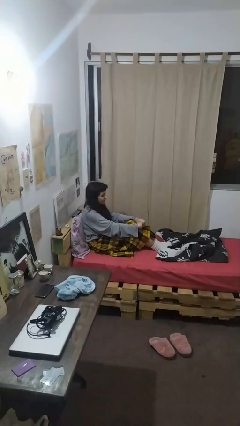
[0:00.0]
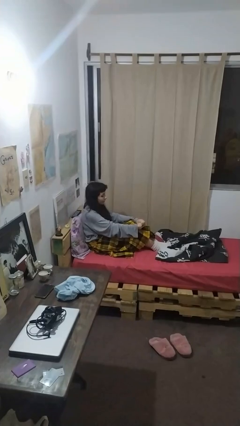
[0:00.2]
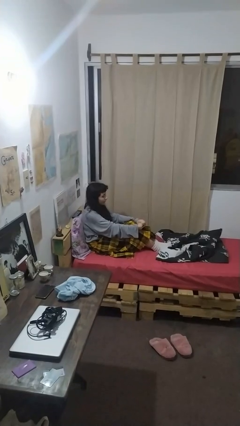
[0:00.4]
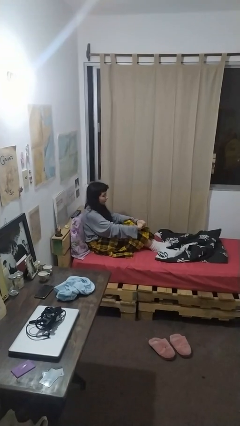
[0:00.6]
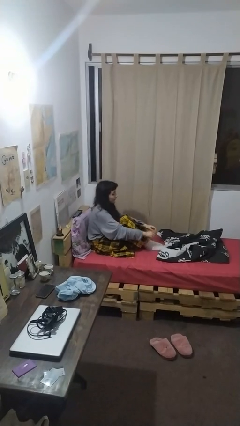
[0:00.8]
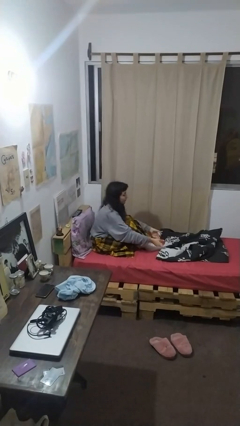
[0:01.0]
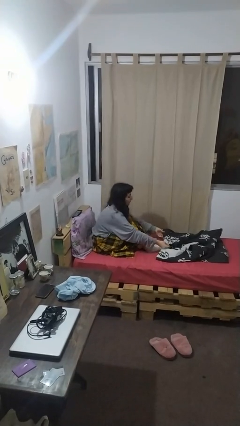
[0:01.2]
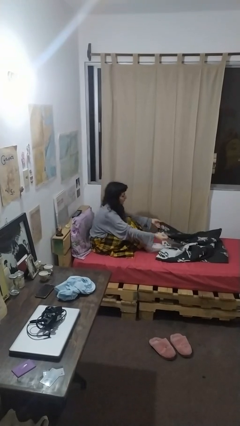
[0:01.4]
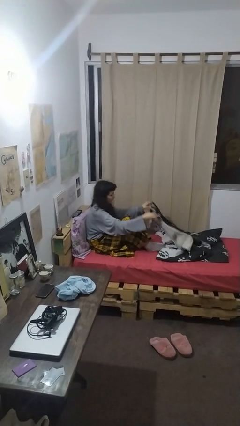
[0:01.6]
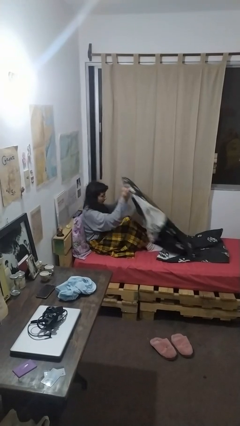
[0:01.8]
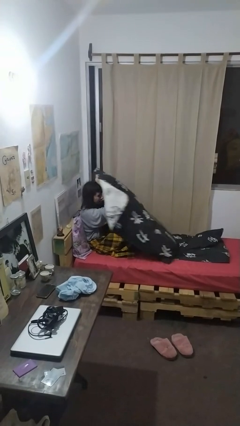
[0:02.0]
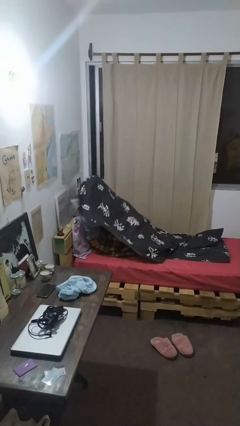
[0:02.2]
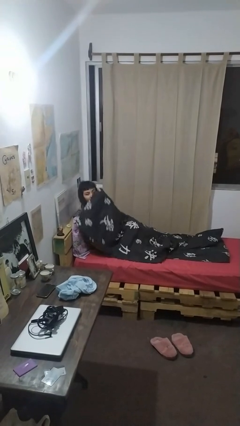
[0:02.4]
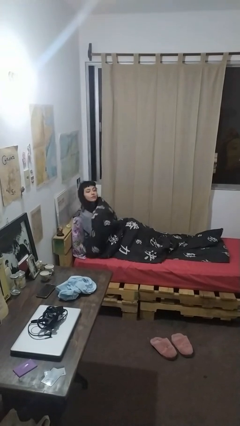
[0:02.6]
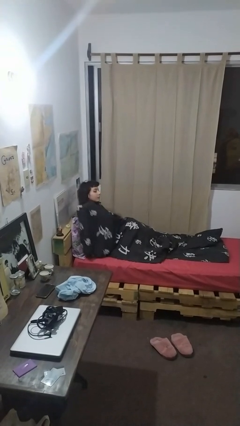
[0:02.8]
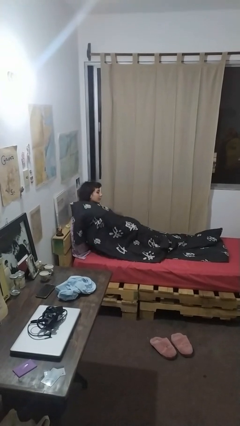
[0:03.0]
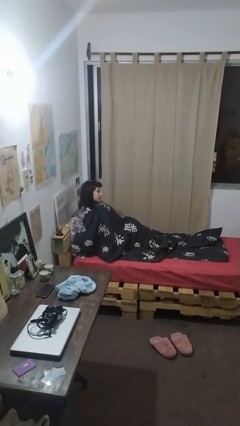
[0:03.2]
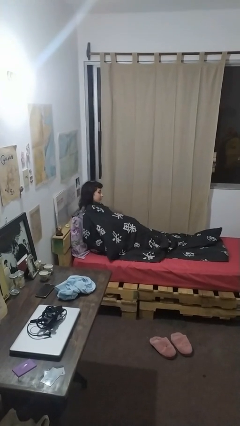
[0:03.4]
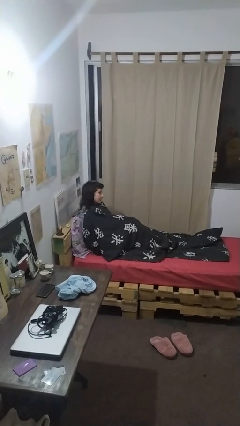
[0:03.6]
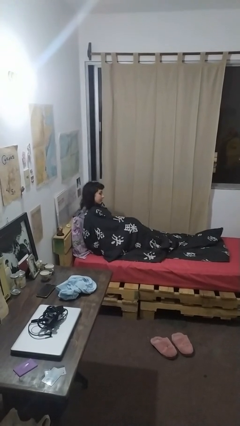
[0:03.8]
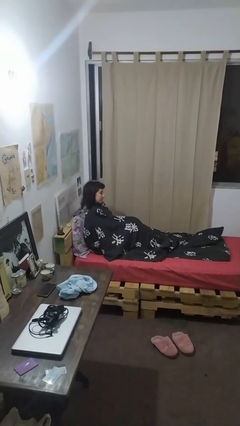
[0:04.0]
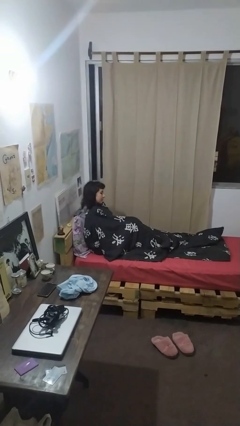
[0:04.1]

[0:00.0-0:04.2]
person covers with blanket

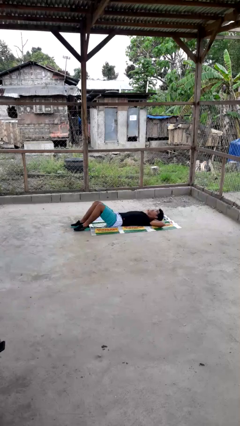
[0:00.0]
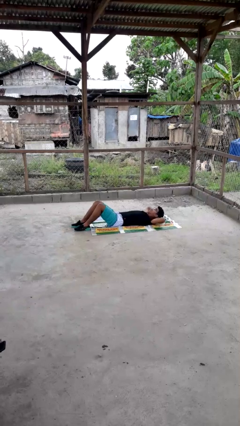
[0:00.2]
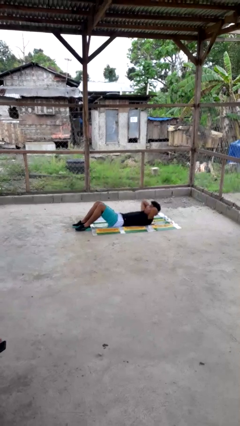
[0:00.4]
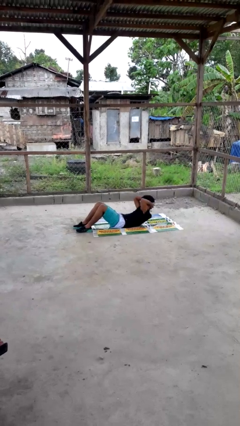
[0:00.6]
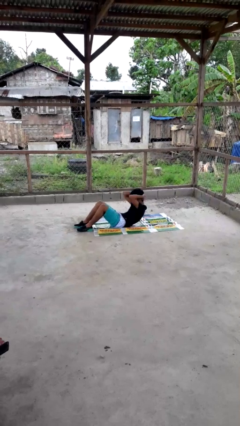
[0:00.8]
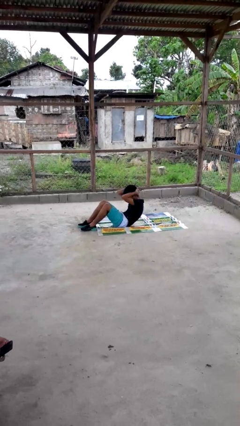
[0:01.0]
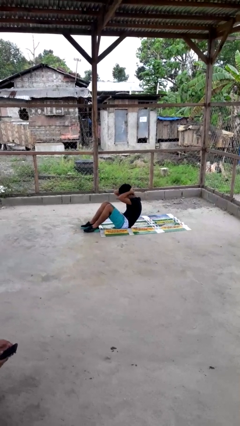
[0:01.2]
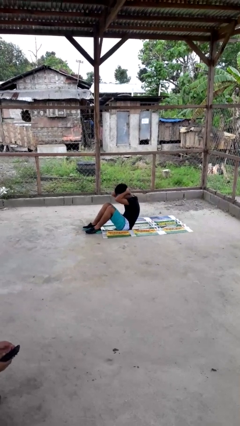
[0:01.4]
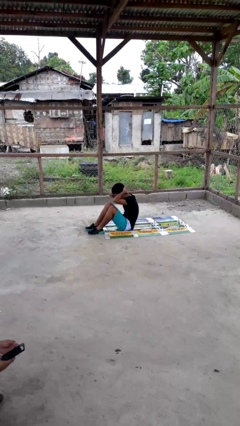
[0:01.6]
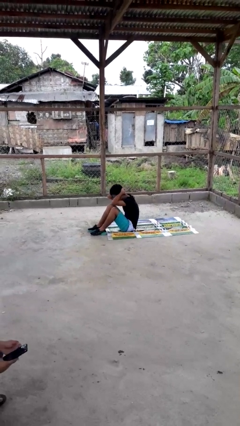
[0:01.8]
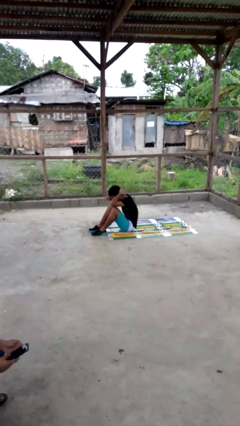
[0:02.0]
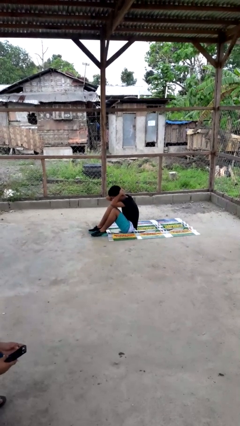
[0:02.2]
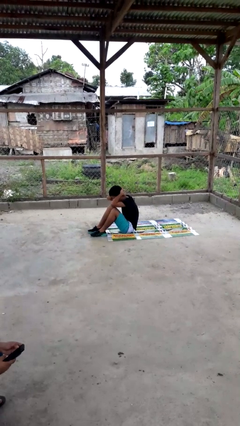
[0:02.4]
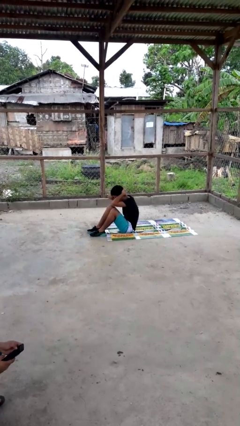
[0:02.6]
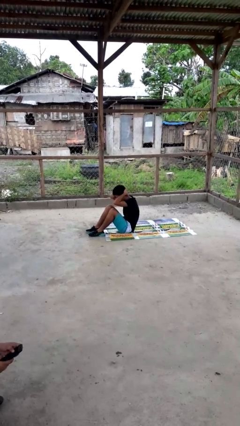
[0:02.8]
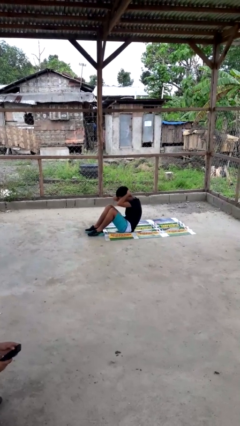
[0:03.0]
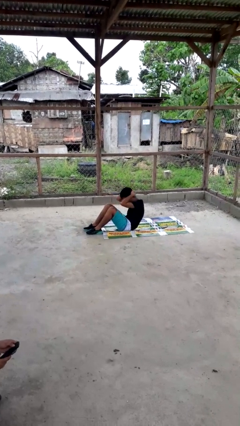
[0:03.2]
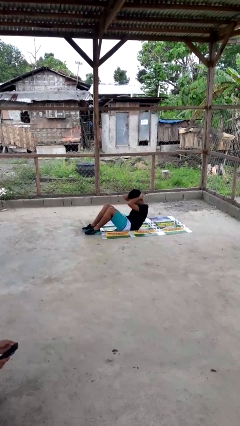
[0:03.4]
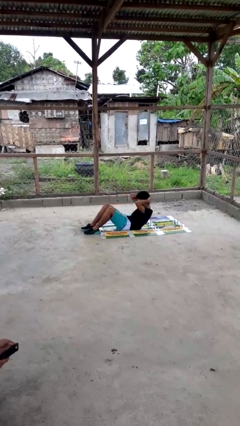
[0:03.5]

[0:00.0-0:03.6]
person exercises with situp

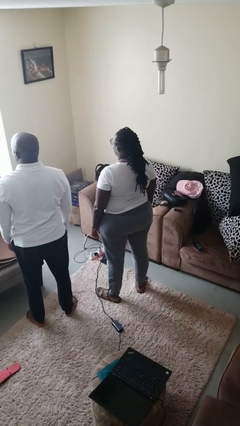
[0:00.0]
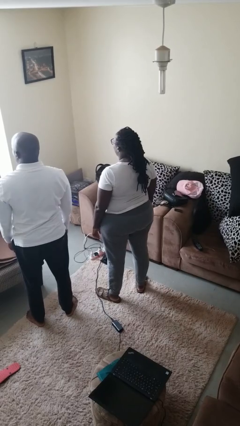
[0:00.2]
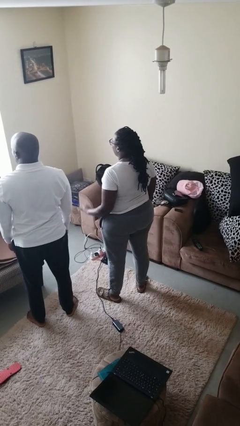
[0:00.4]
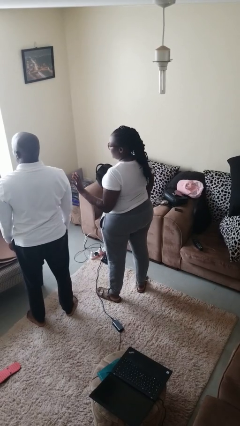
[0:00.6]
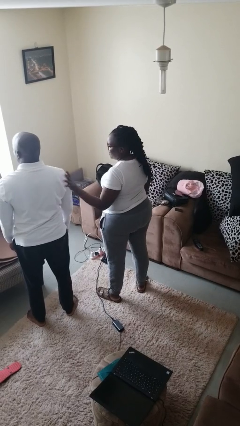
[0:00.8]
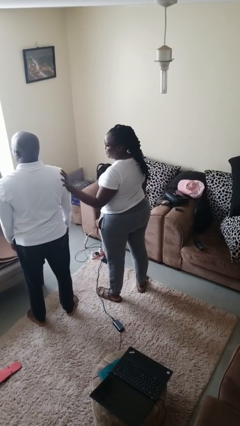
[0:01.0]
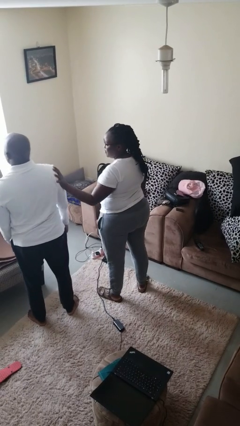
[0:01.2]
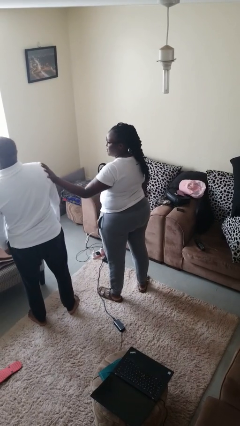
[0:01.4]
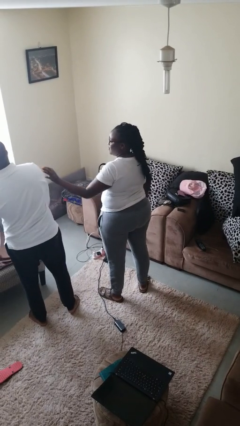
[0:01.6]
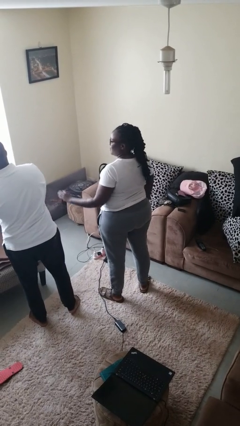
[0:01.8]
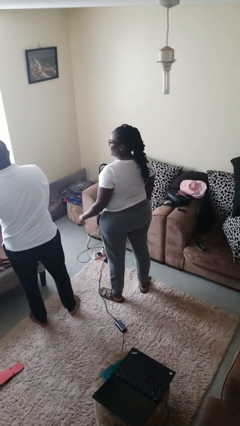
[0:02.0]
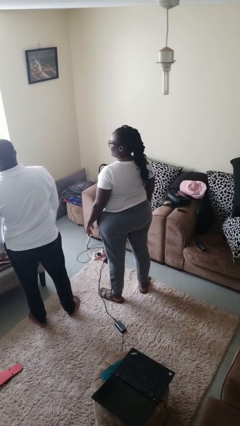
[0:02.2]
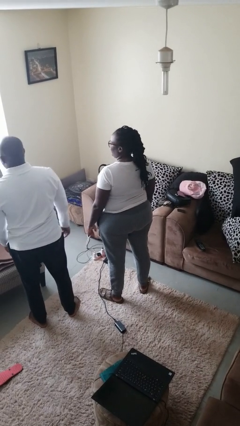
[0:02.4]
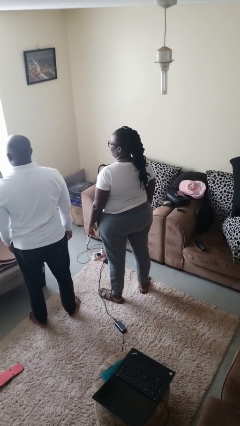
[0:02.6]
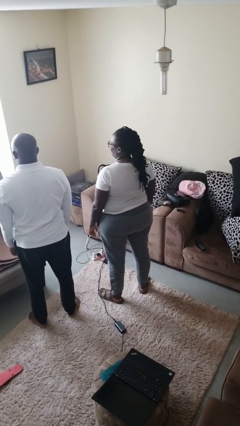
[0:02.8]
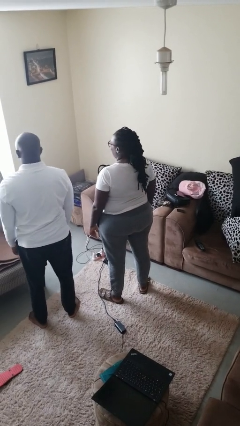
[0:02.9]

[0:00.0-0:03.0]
person shoves person

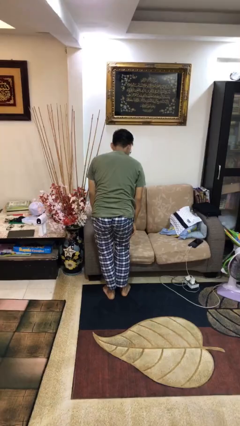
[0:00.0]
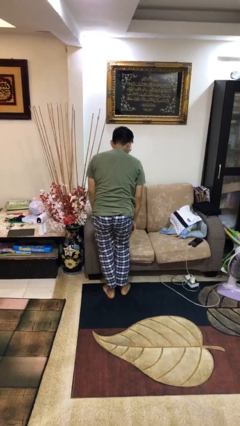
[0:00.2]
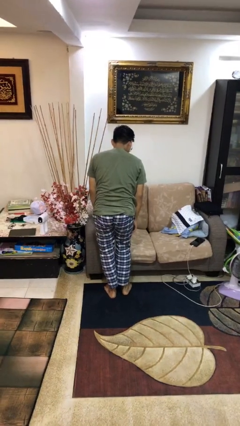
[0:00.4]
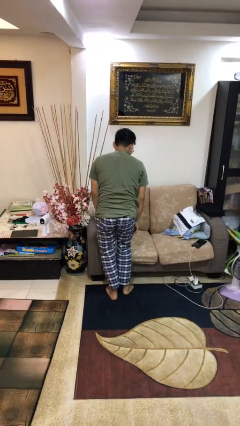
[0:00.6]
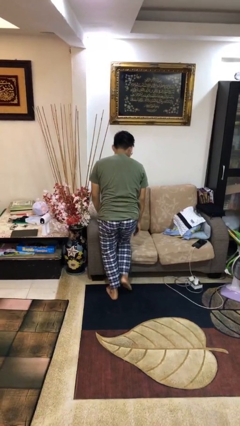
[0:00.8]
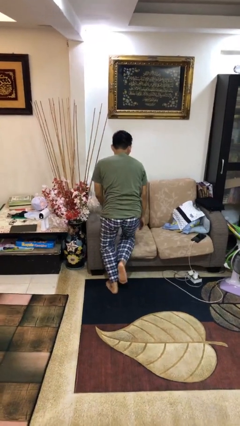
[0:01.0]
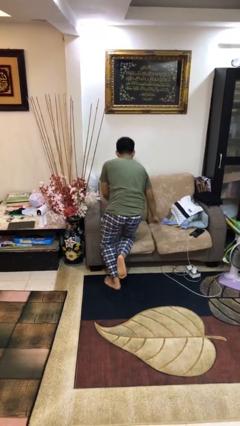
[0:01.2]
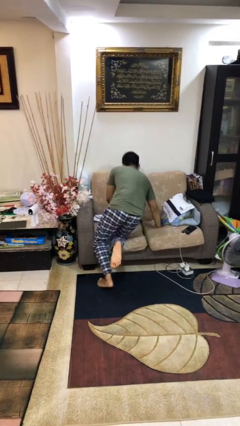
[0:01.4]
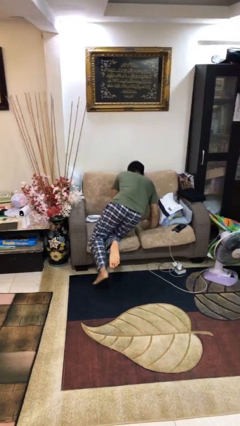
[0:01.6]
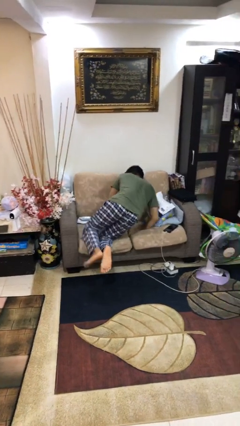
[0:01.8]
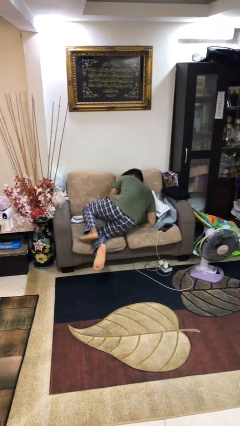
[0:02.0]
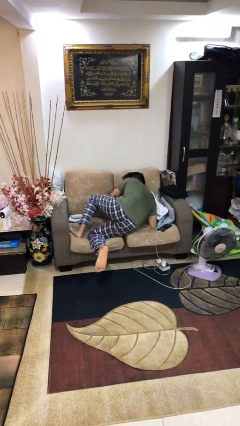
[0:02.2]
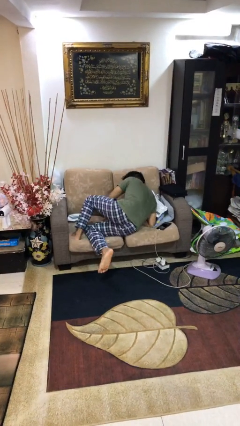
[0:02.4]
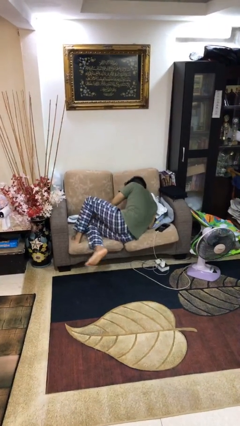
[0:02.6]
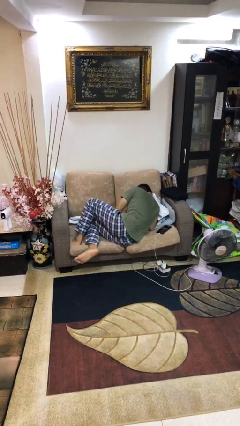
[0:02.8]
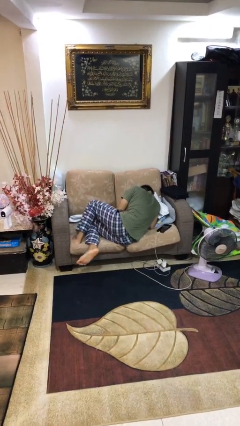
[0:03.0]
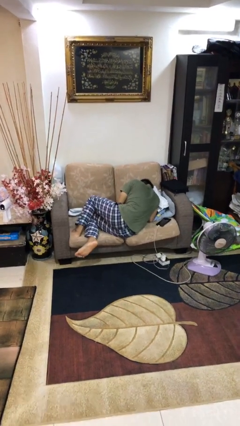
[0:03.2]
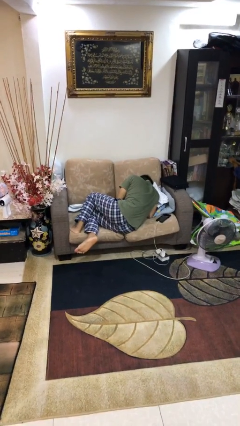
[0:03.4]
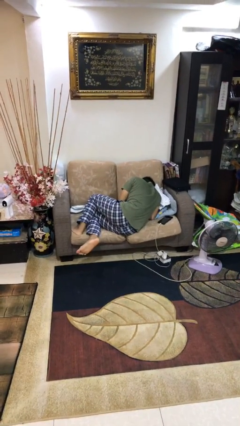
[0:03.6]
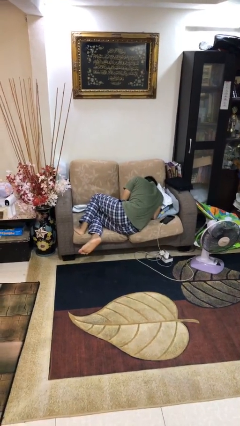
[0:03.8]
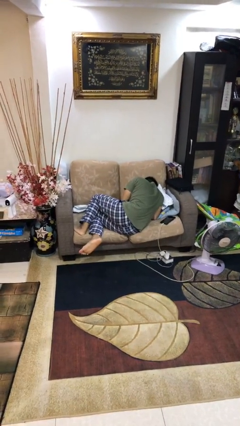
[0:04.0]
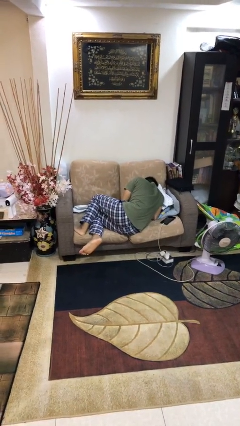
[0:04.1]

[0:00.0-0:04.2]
person lies down on couch

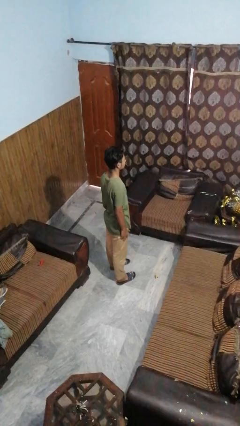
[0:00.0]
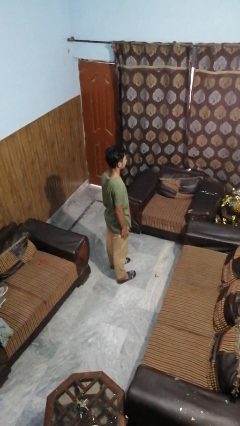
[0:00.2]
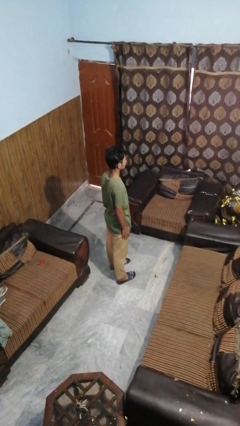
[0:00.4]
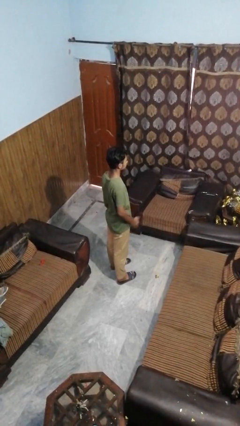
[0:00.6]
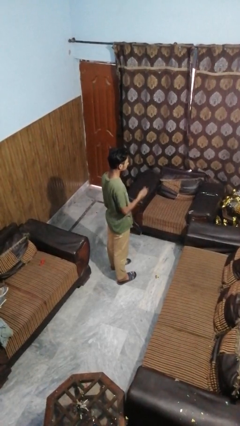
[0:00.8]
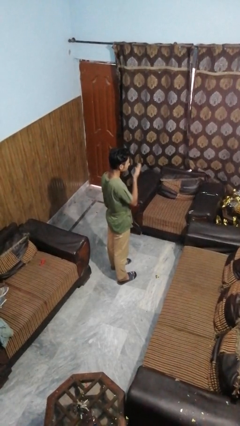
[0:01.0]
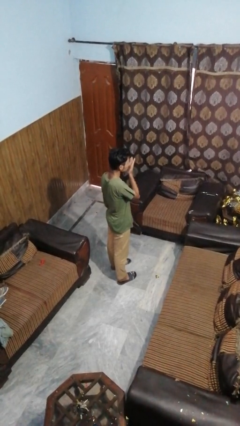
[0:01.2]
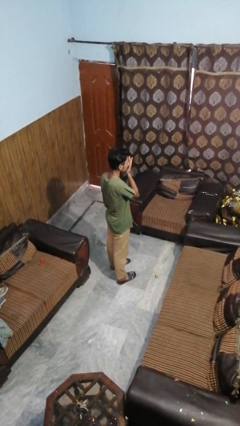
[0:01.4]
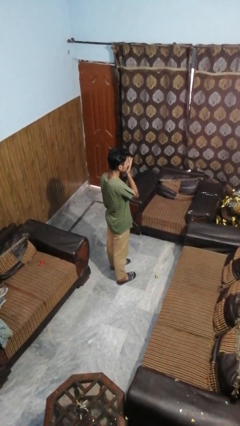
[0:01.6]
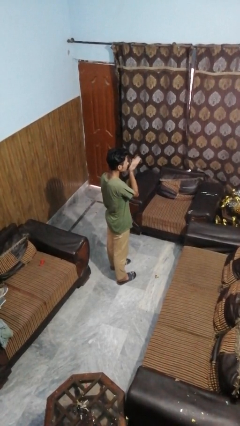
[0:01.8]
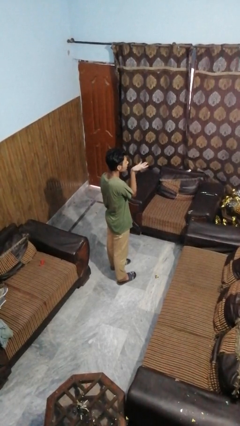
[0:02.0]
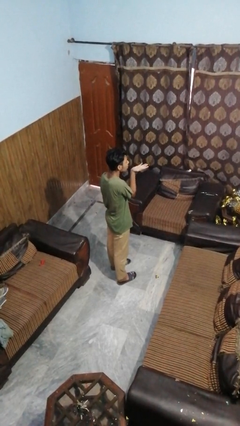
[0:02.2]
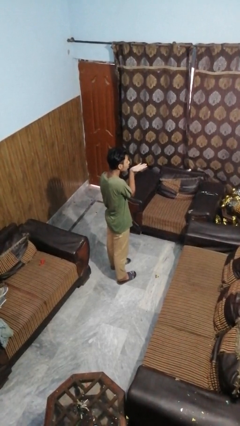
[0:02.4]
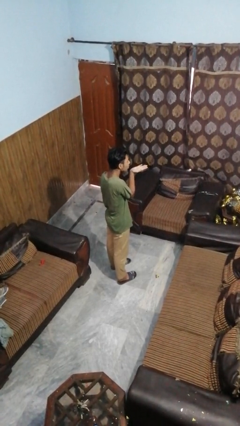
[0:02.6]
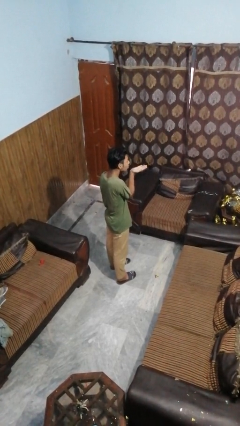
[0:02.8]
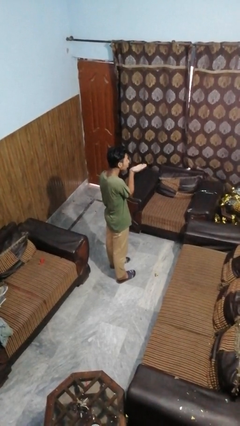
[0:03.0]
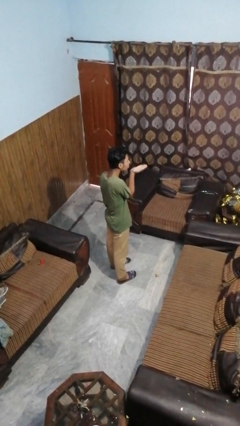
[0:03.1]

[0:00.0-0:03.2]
person gestures blow kiss
